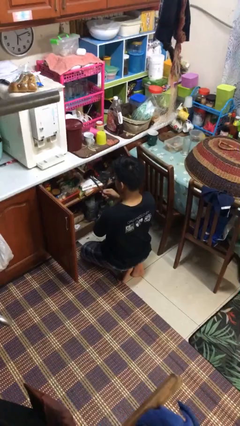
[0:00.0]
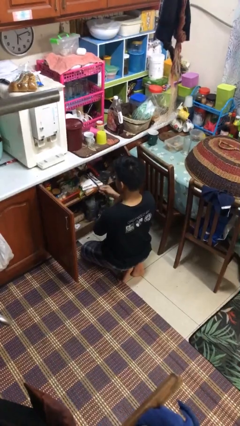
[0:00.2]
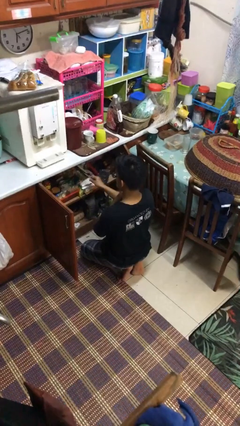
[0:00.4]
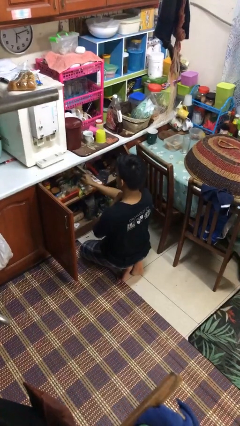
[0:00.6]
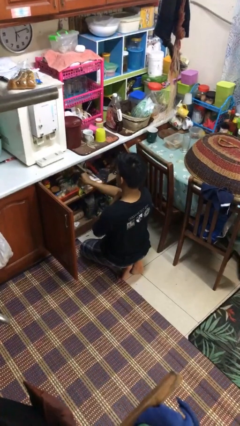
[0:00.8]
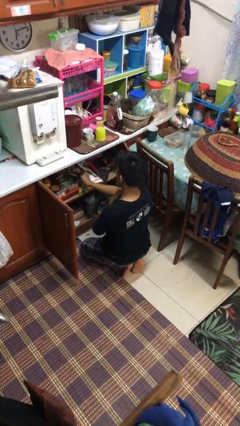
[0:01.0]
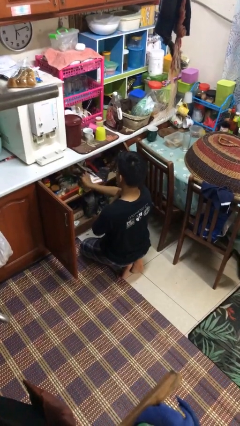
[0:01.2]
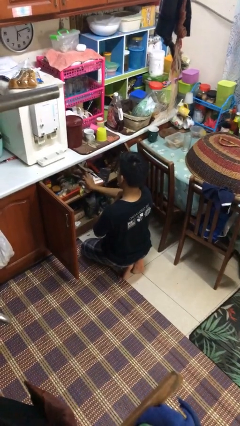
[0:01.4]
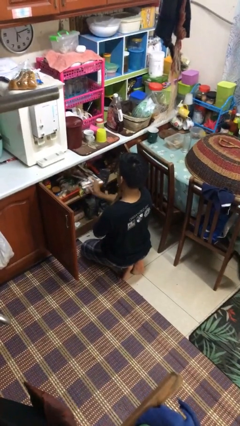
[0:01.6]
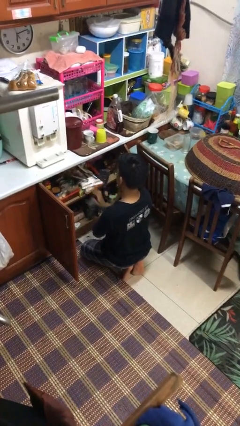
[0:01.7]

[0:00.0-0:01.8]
person puts object into kitchen drawer

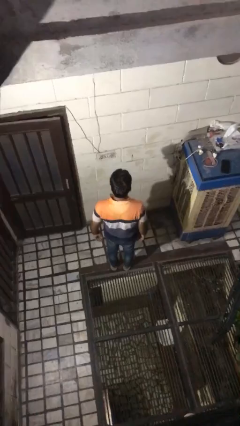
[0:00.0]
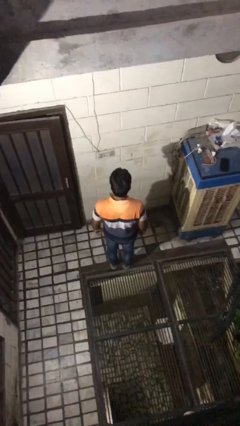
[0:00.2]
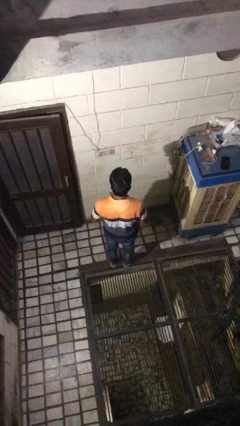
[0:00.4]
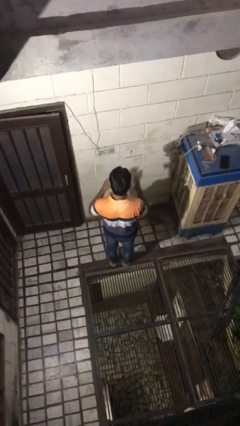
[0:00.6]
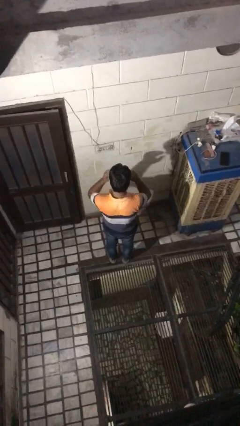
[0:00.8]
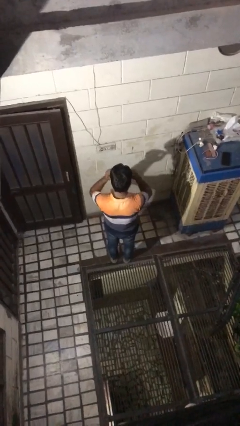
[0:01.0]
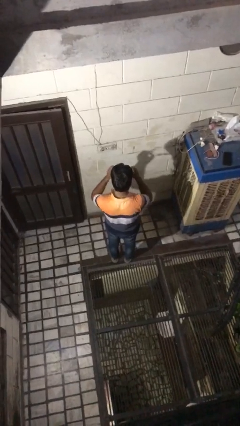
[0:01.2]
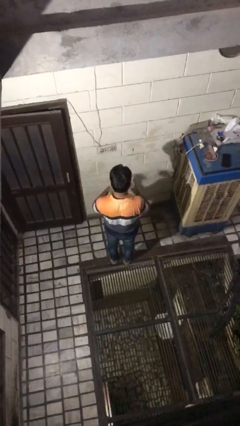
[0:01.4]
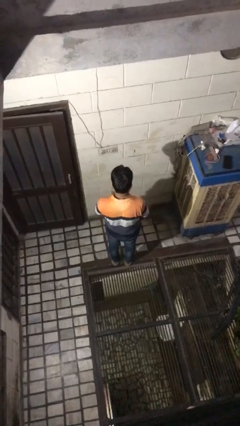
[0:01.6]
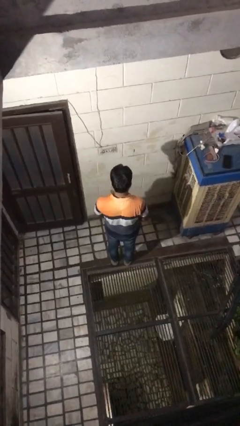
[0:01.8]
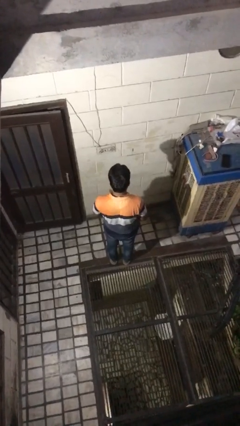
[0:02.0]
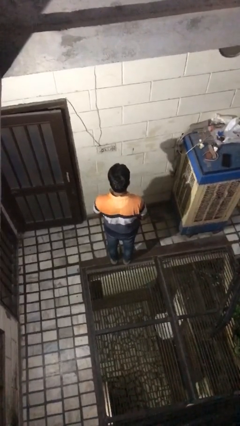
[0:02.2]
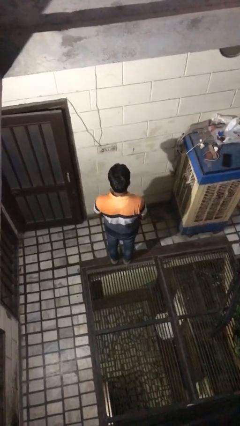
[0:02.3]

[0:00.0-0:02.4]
person takes off glasses

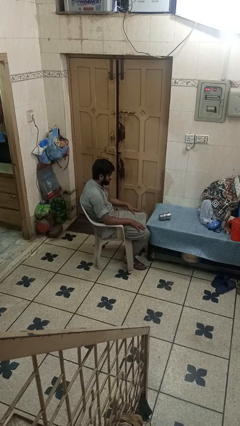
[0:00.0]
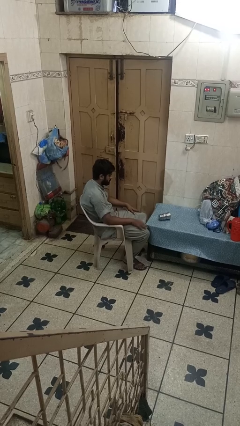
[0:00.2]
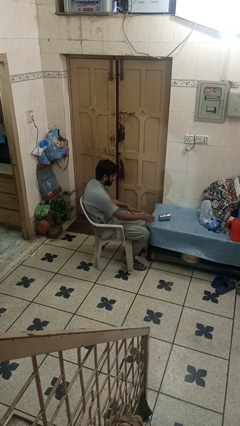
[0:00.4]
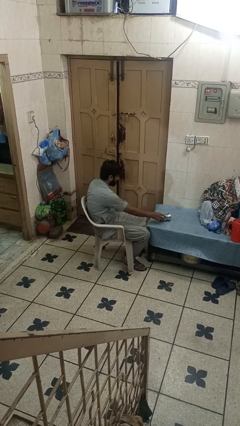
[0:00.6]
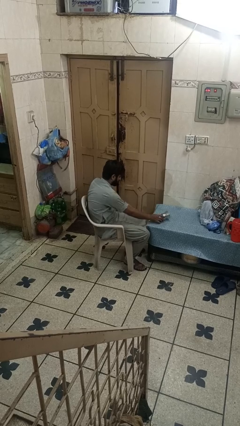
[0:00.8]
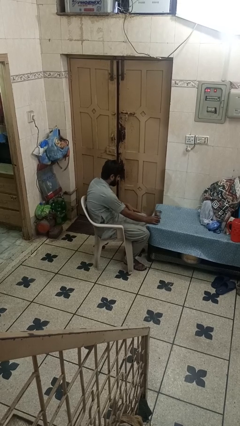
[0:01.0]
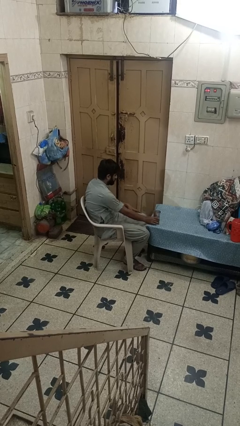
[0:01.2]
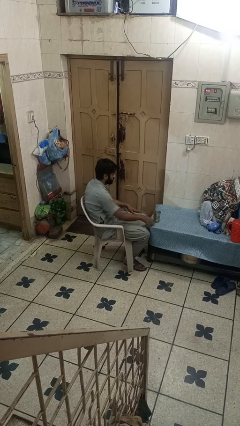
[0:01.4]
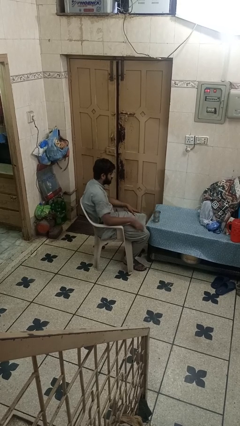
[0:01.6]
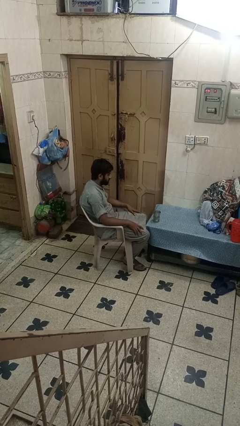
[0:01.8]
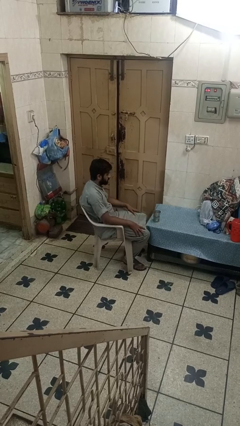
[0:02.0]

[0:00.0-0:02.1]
person sets upright glass

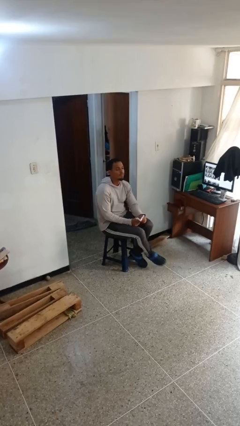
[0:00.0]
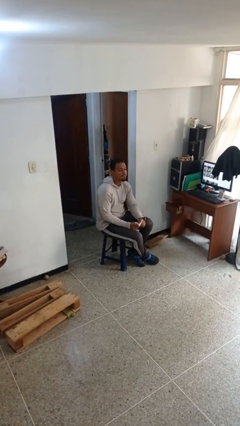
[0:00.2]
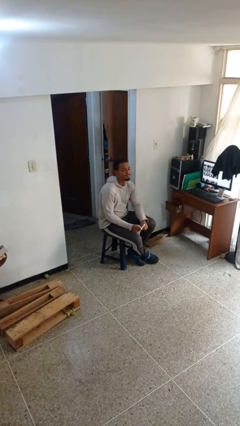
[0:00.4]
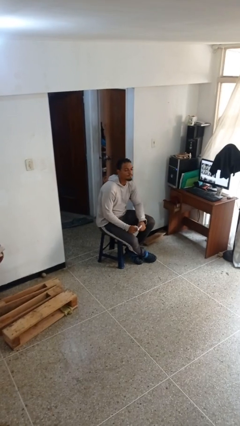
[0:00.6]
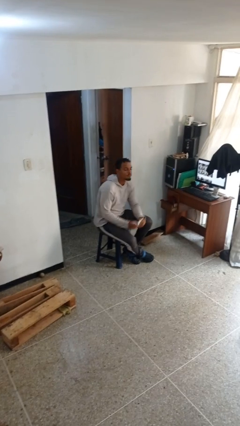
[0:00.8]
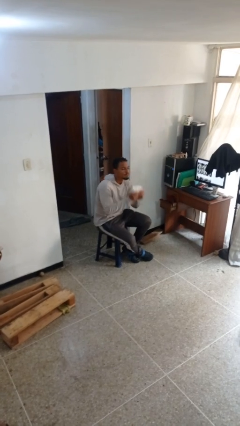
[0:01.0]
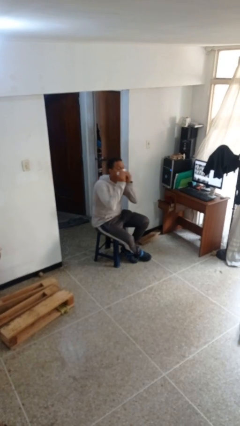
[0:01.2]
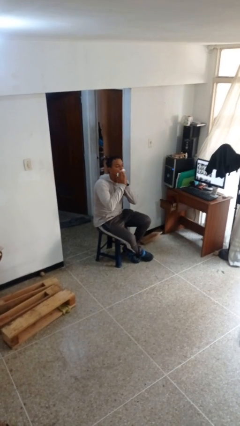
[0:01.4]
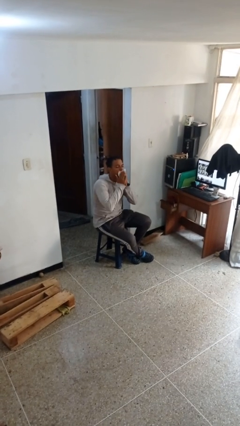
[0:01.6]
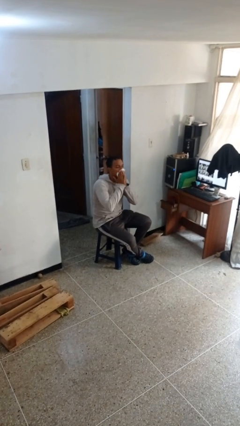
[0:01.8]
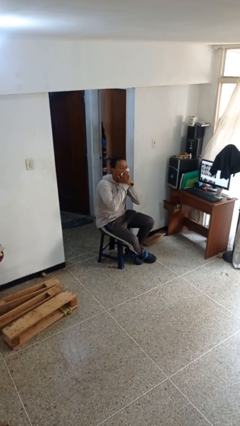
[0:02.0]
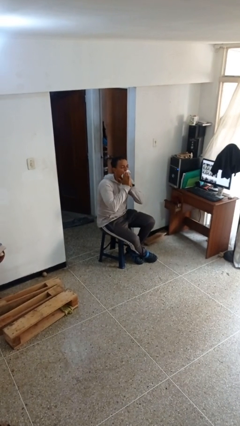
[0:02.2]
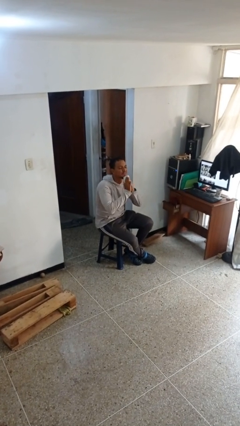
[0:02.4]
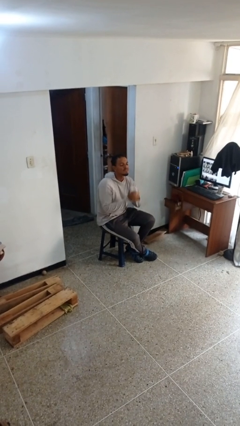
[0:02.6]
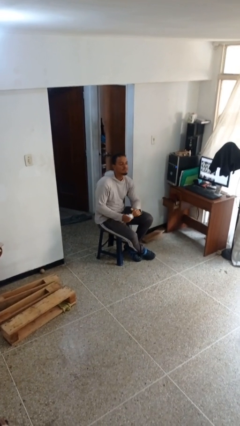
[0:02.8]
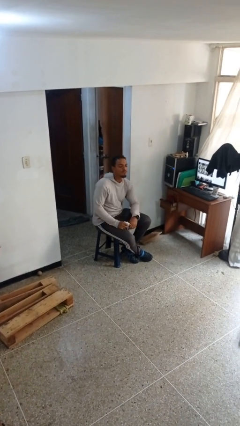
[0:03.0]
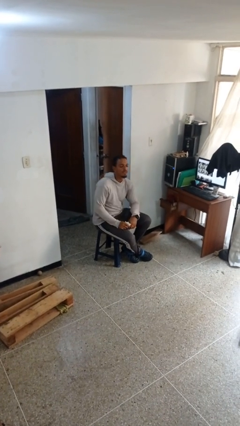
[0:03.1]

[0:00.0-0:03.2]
person wipes mouth with napkin

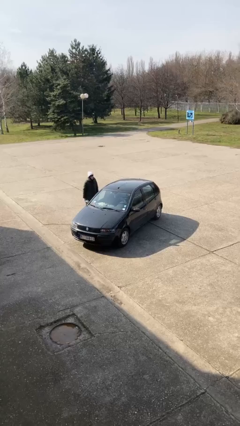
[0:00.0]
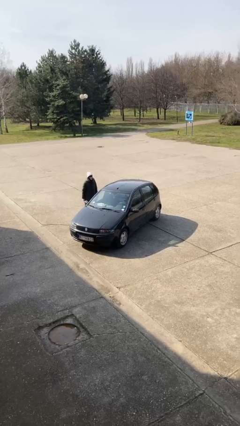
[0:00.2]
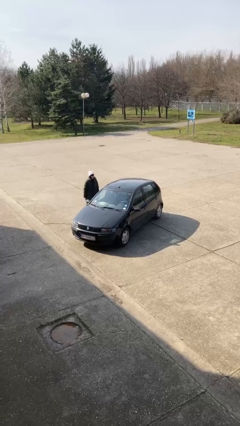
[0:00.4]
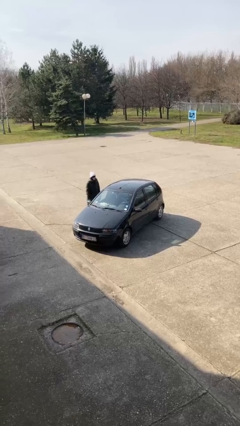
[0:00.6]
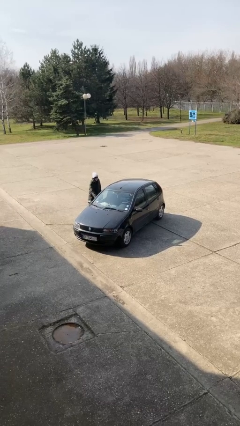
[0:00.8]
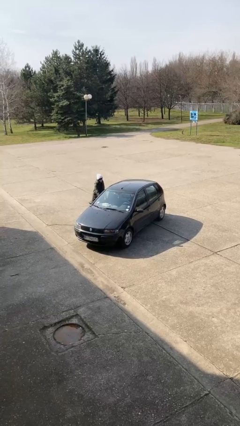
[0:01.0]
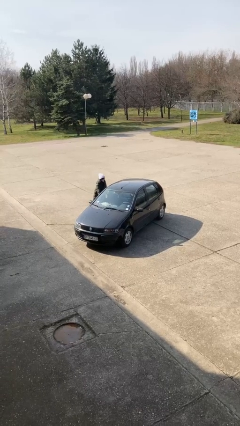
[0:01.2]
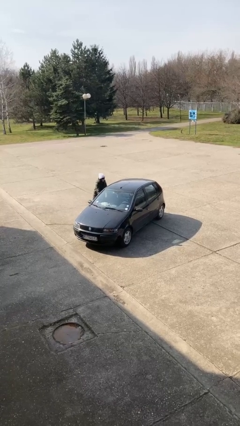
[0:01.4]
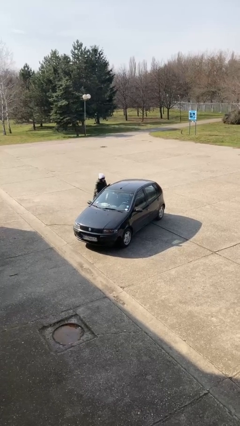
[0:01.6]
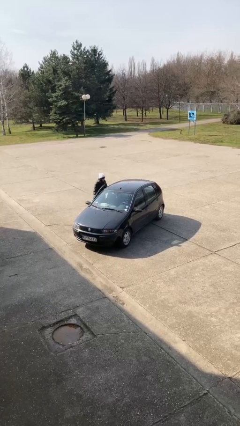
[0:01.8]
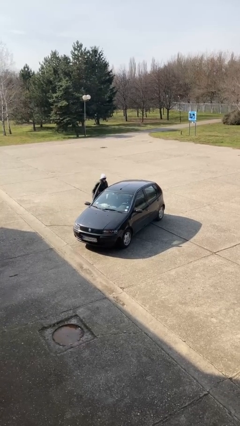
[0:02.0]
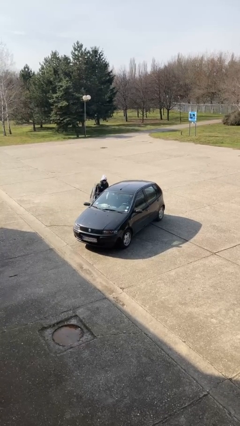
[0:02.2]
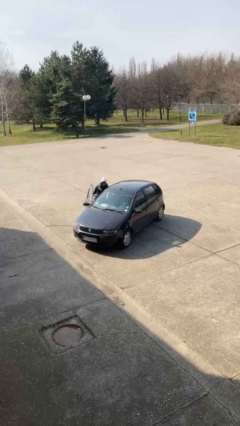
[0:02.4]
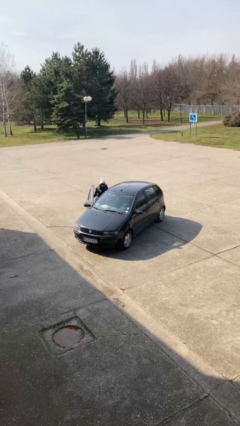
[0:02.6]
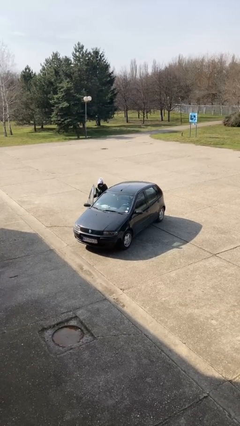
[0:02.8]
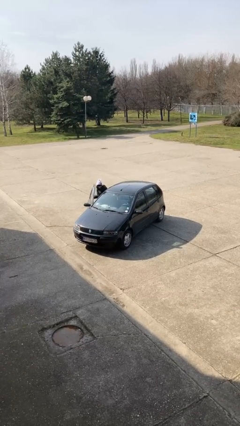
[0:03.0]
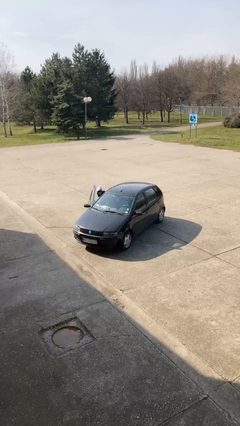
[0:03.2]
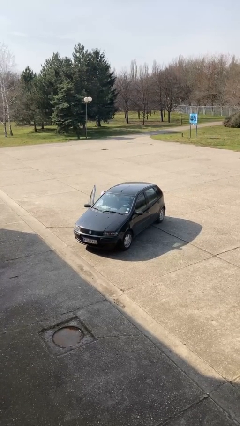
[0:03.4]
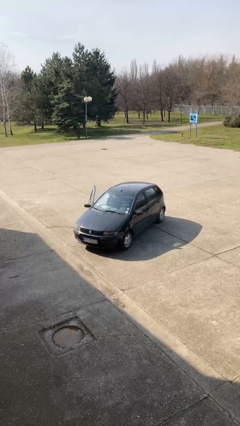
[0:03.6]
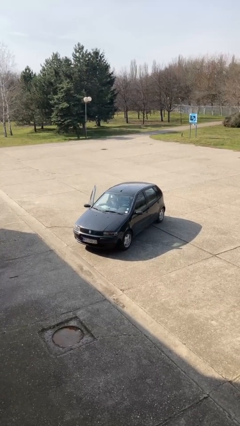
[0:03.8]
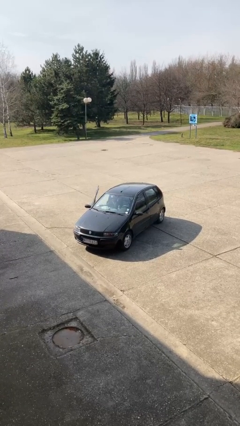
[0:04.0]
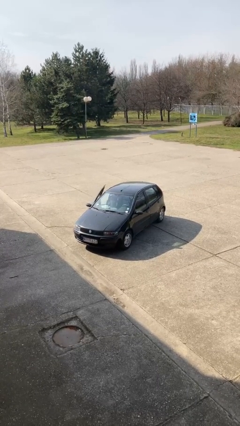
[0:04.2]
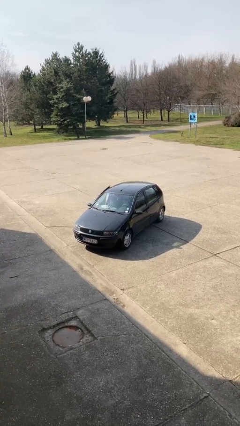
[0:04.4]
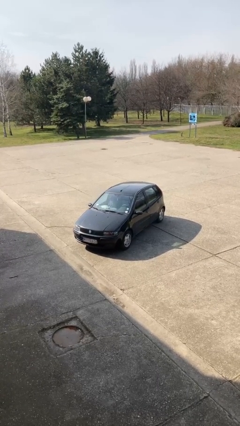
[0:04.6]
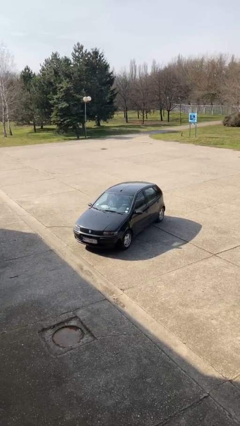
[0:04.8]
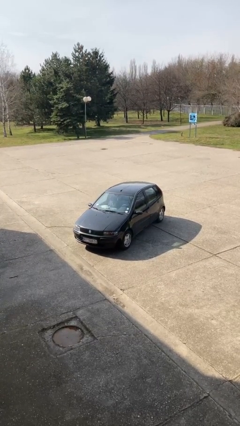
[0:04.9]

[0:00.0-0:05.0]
car picks up person

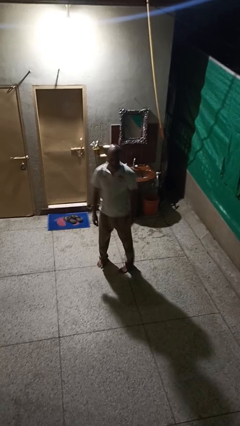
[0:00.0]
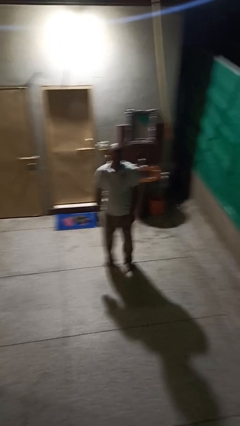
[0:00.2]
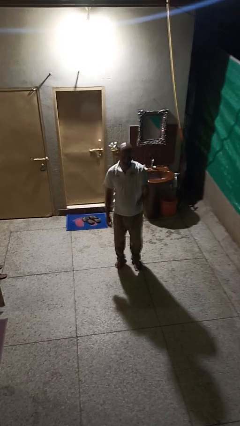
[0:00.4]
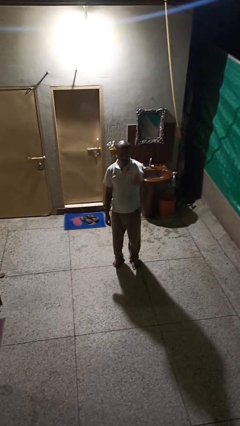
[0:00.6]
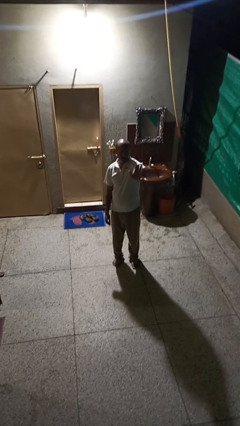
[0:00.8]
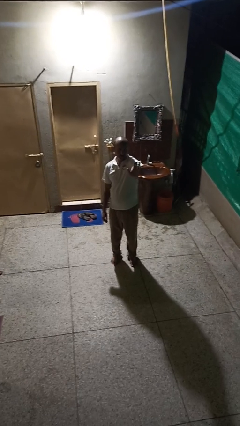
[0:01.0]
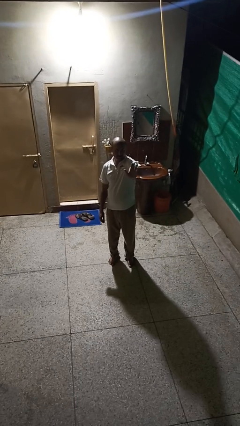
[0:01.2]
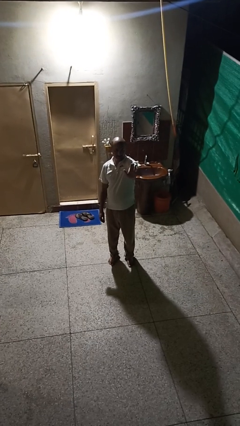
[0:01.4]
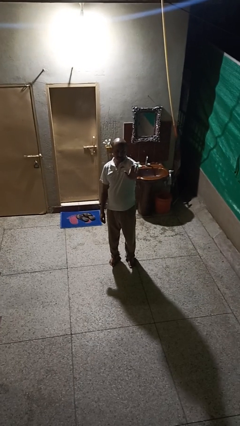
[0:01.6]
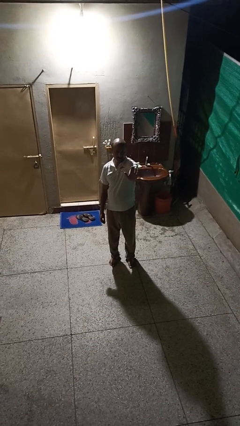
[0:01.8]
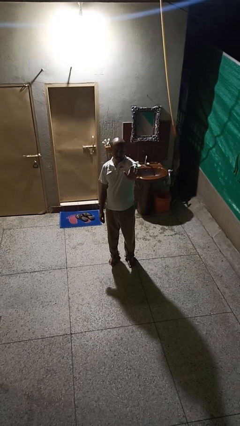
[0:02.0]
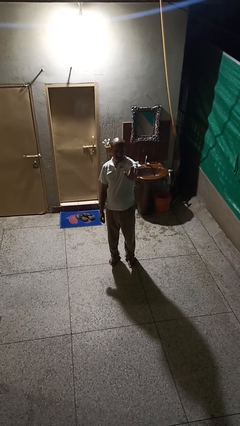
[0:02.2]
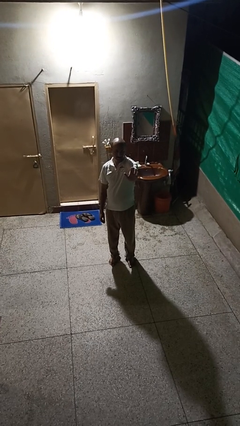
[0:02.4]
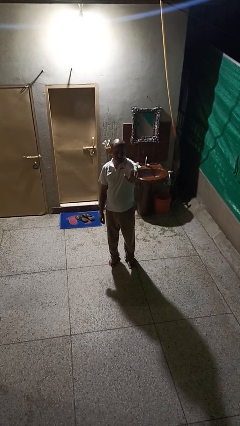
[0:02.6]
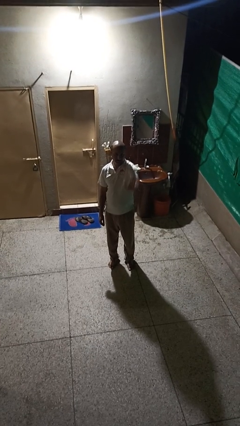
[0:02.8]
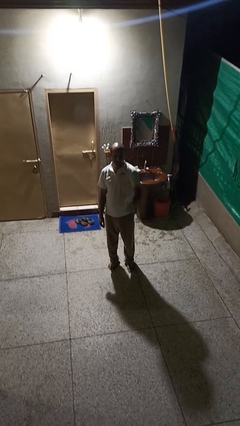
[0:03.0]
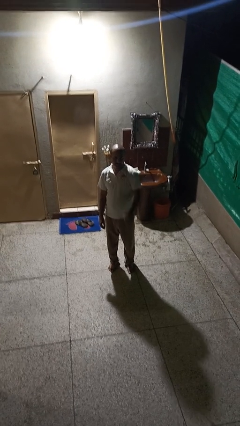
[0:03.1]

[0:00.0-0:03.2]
person gestures stop
